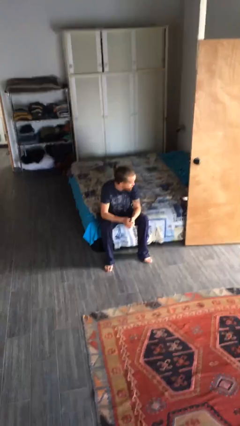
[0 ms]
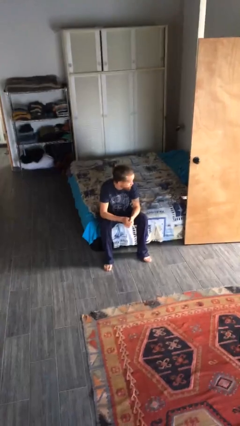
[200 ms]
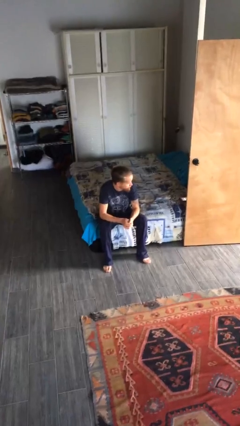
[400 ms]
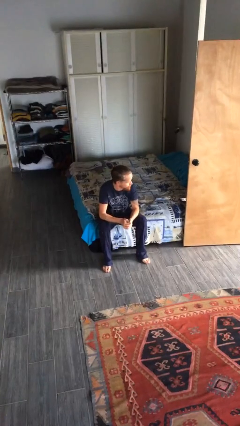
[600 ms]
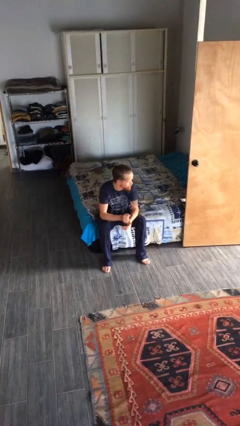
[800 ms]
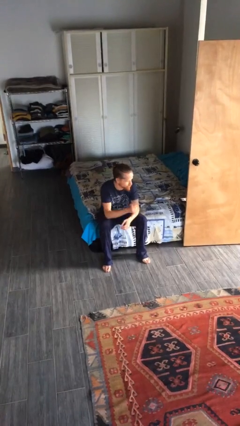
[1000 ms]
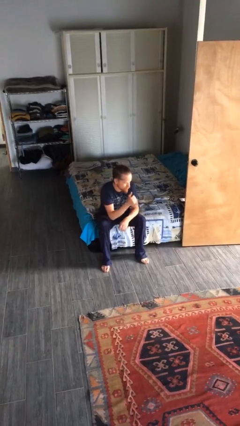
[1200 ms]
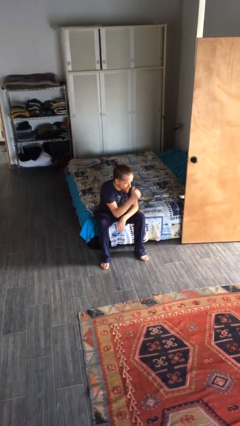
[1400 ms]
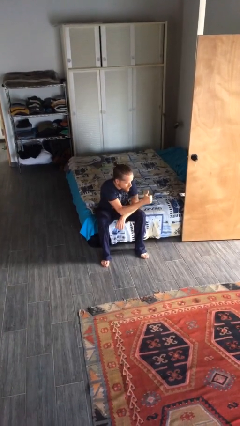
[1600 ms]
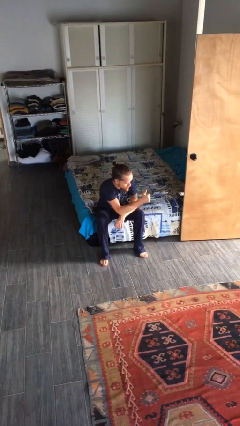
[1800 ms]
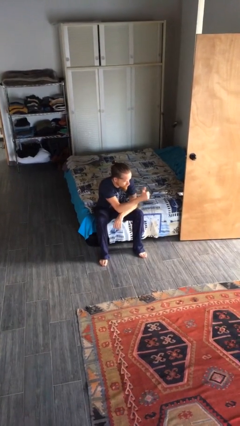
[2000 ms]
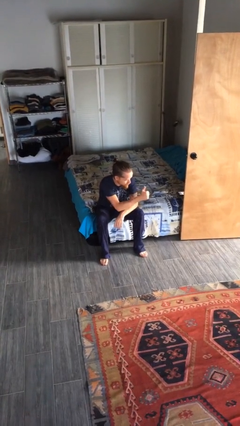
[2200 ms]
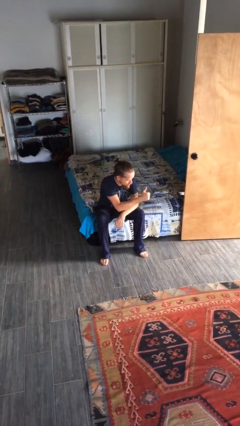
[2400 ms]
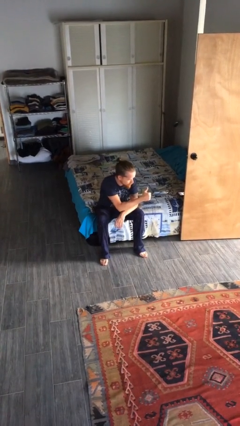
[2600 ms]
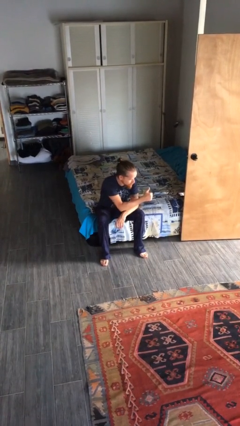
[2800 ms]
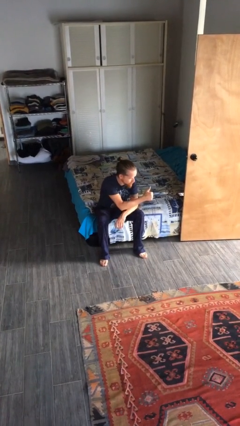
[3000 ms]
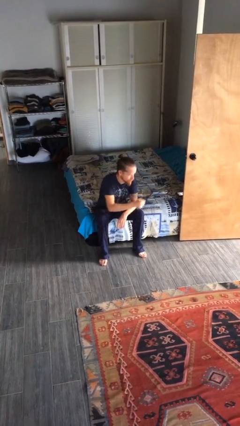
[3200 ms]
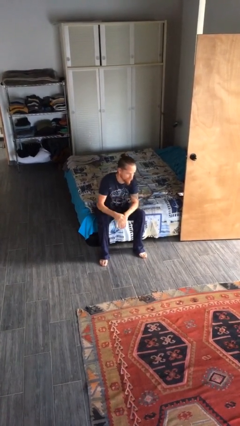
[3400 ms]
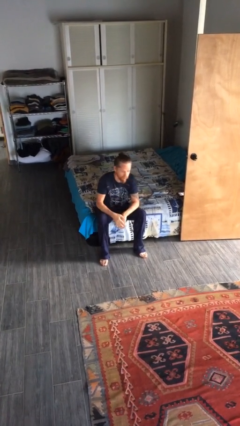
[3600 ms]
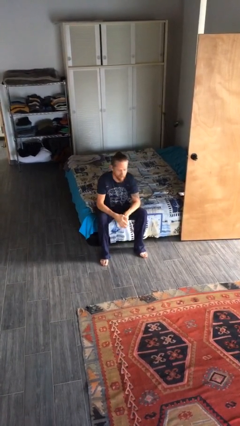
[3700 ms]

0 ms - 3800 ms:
person gestures thumbs up

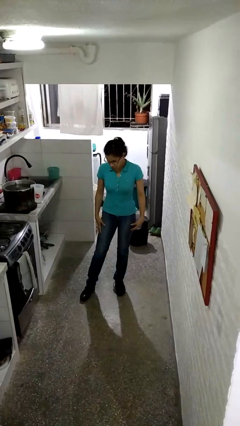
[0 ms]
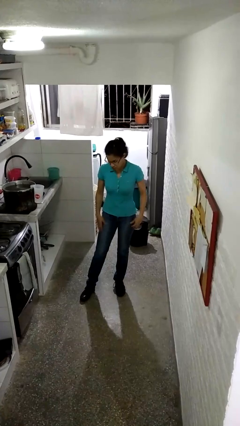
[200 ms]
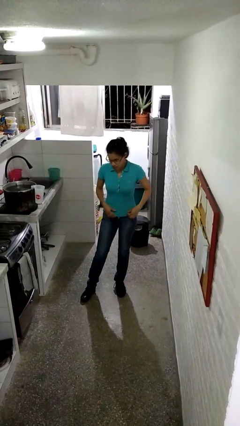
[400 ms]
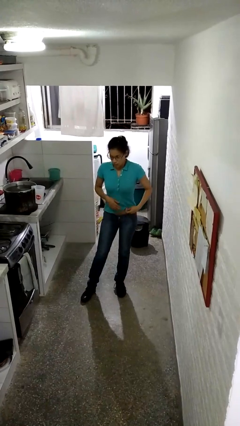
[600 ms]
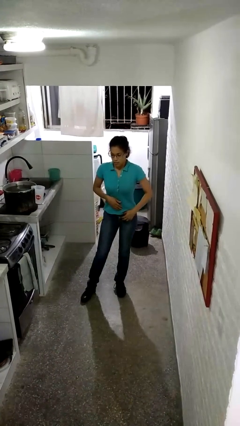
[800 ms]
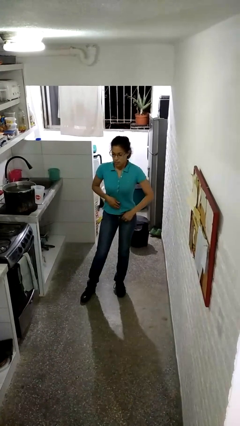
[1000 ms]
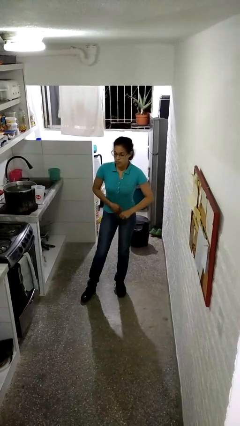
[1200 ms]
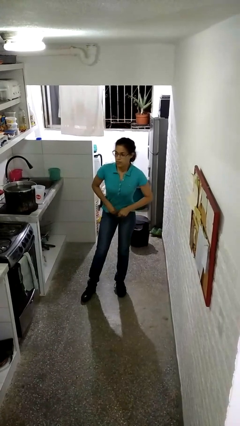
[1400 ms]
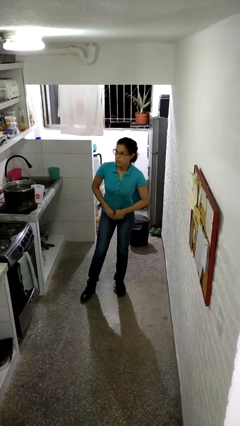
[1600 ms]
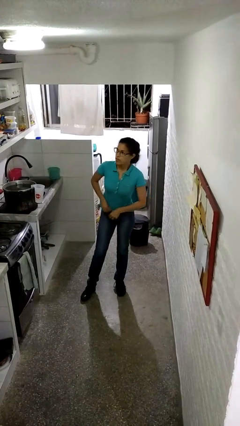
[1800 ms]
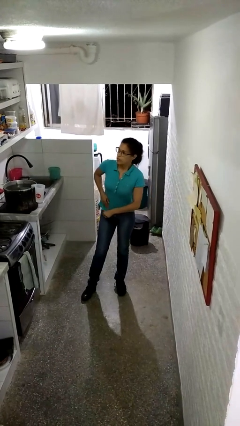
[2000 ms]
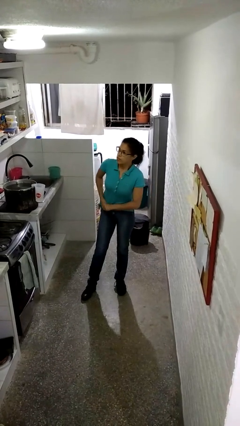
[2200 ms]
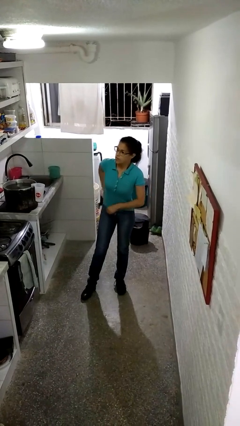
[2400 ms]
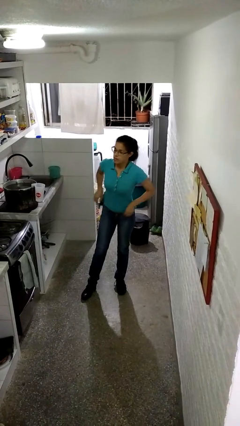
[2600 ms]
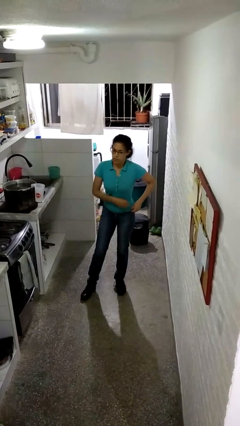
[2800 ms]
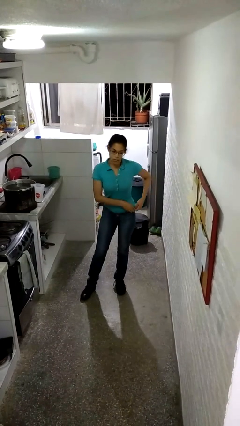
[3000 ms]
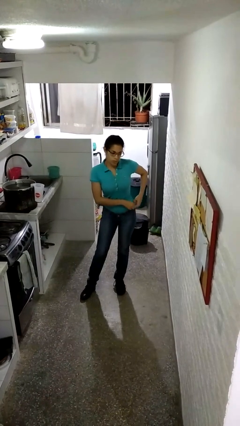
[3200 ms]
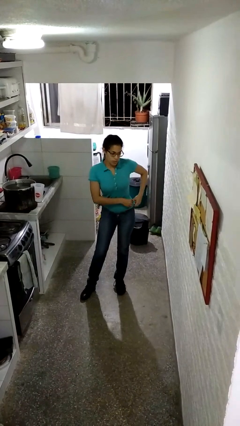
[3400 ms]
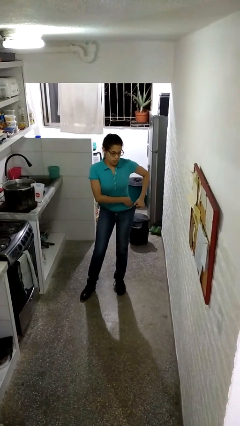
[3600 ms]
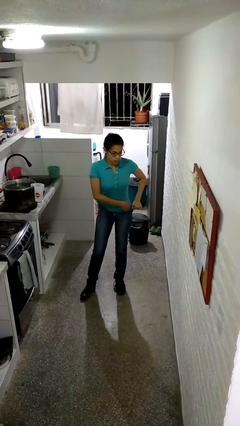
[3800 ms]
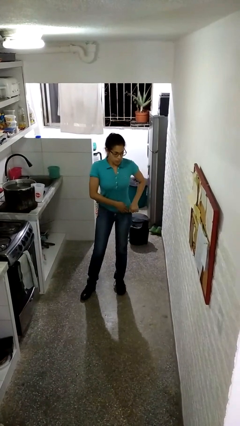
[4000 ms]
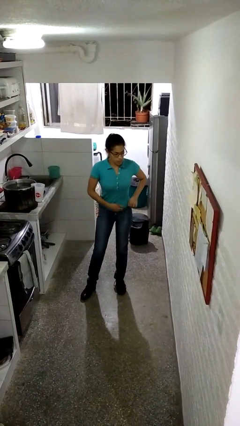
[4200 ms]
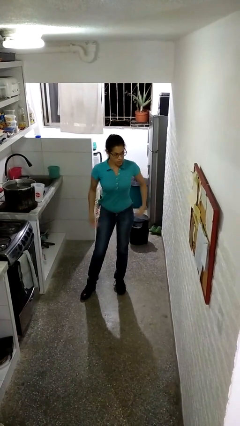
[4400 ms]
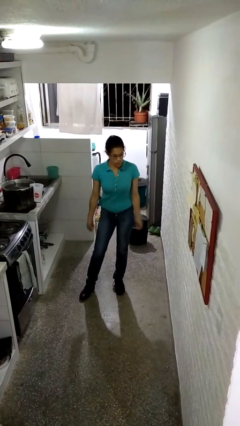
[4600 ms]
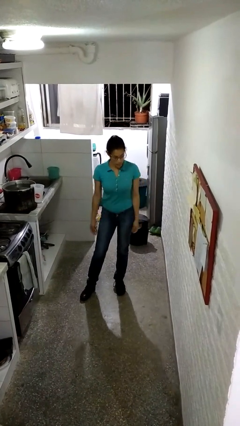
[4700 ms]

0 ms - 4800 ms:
person tucks in shirt

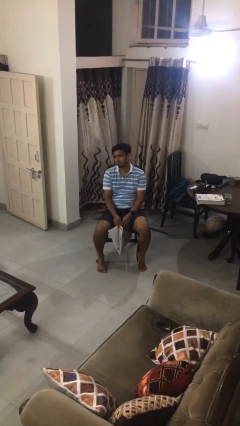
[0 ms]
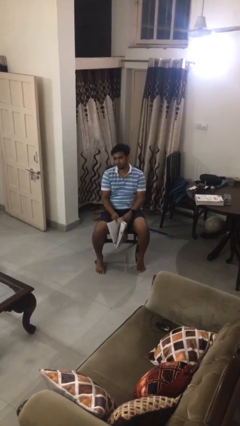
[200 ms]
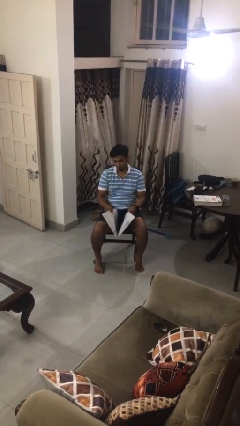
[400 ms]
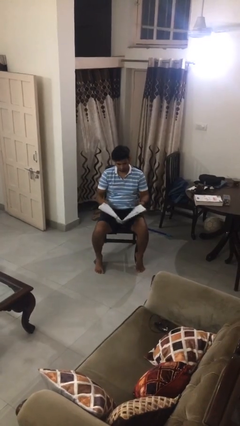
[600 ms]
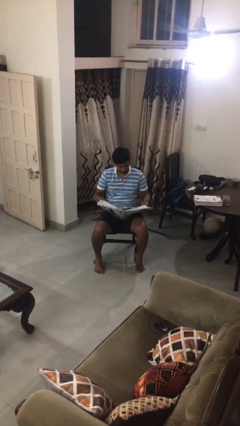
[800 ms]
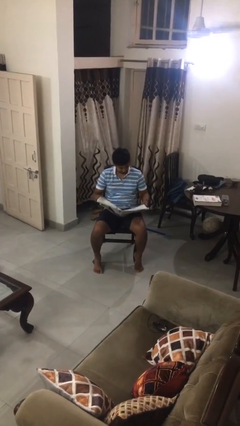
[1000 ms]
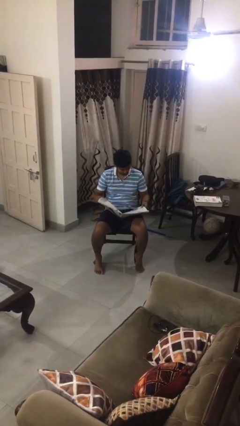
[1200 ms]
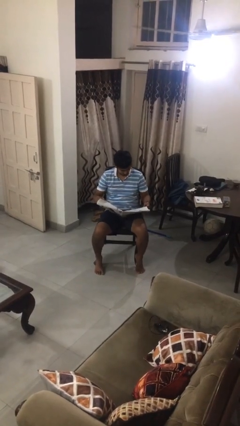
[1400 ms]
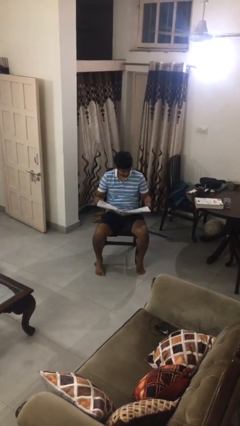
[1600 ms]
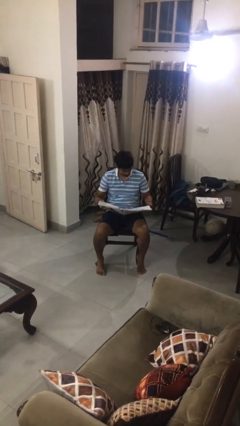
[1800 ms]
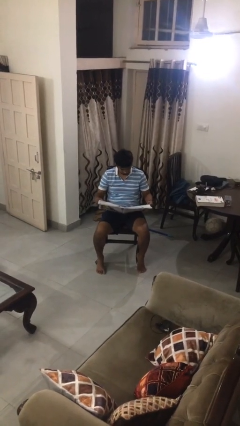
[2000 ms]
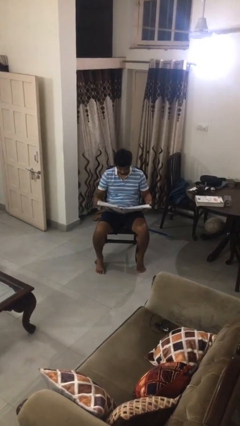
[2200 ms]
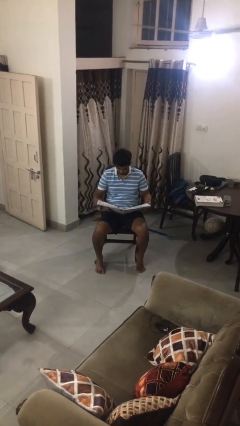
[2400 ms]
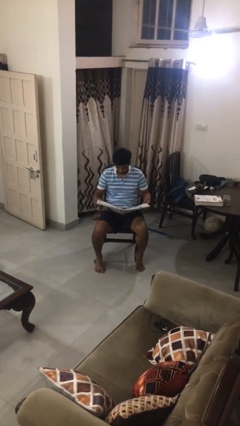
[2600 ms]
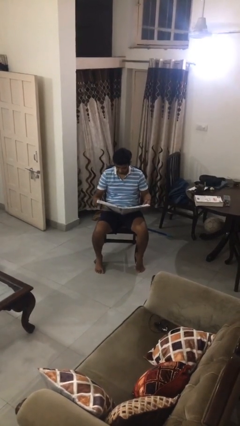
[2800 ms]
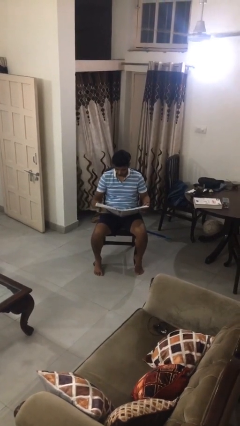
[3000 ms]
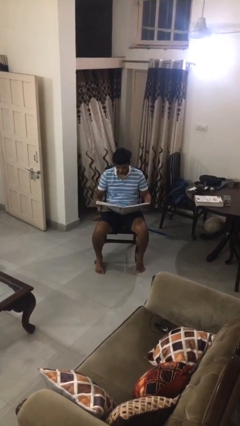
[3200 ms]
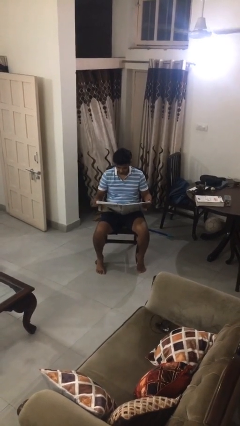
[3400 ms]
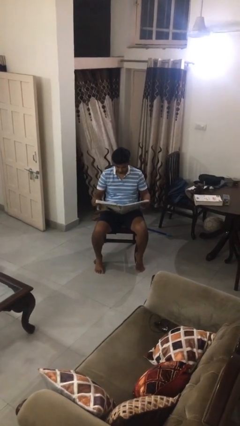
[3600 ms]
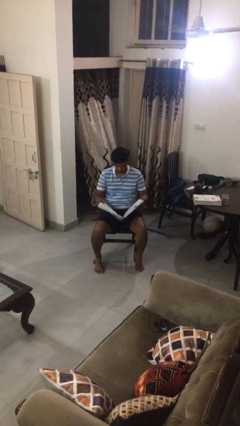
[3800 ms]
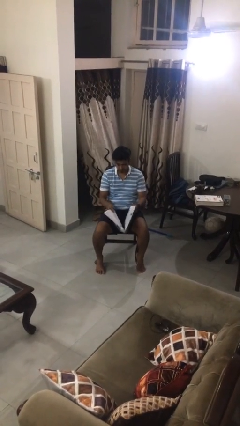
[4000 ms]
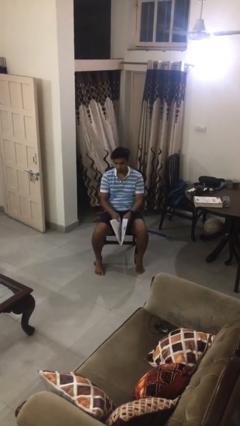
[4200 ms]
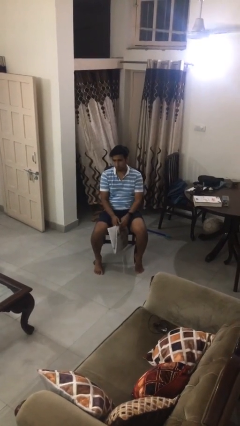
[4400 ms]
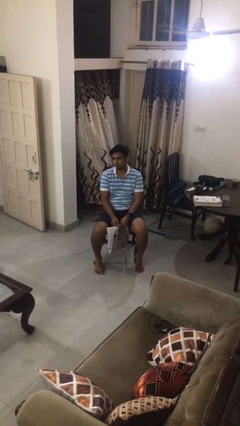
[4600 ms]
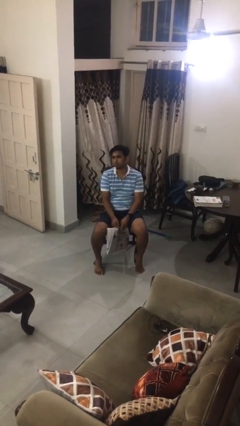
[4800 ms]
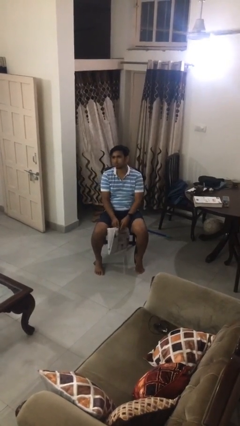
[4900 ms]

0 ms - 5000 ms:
person reads newspaper

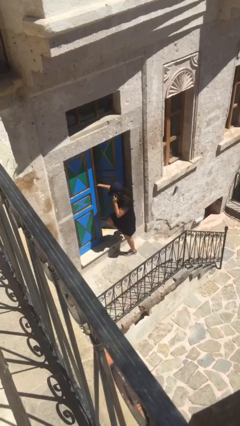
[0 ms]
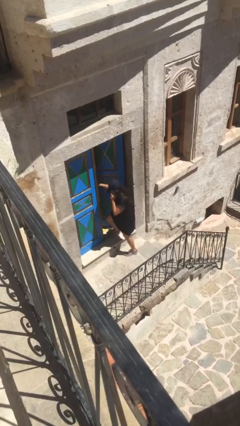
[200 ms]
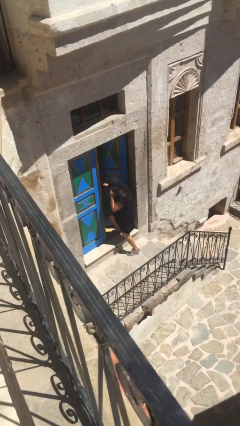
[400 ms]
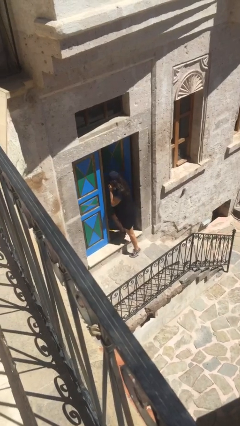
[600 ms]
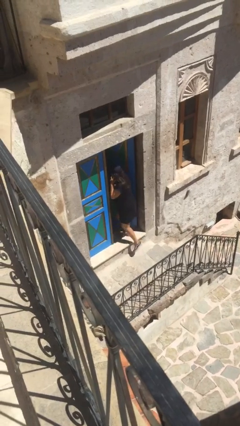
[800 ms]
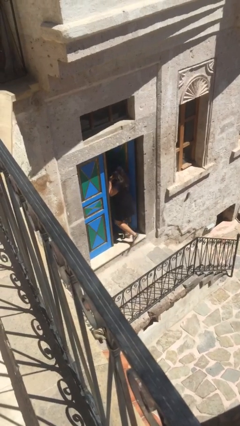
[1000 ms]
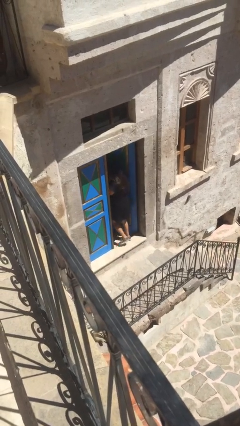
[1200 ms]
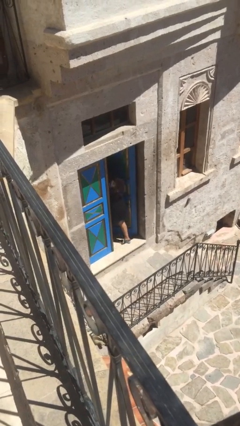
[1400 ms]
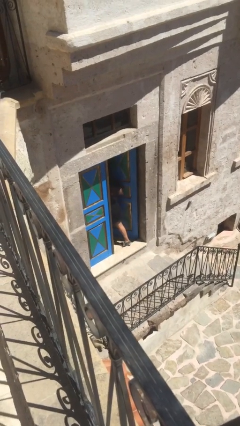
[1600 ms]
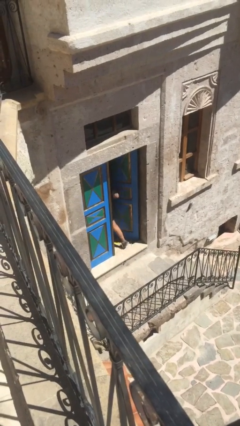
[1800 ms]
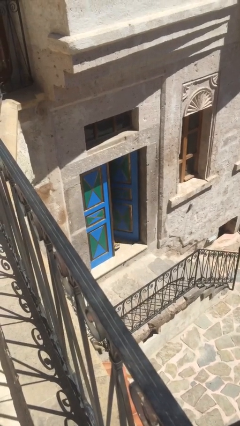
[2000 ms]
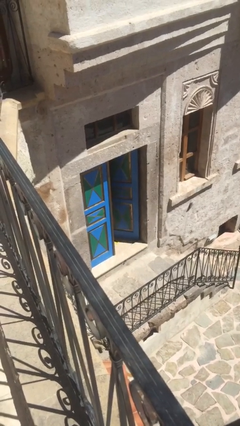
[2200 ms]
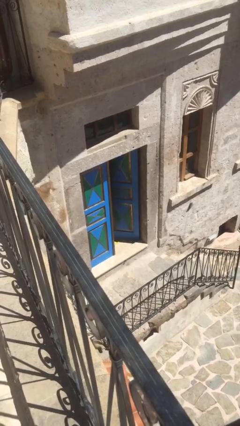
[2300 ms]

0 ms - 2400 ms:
person exits scene through structure

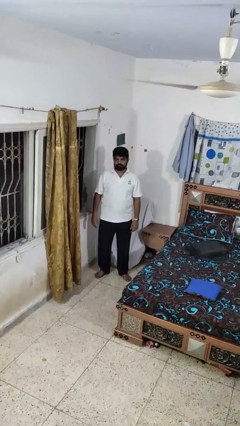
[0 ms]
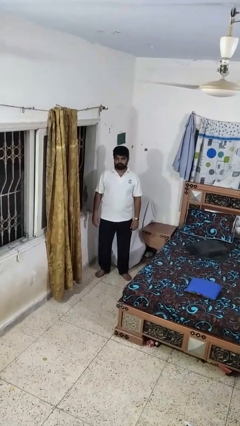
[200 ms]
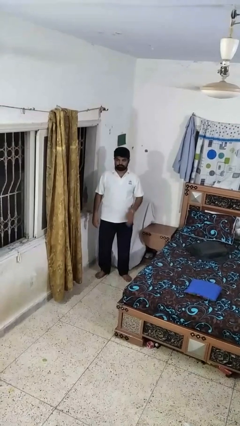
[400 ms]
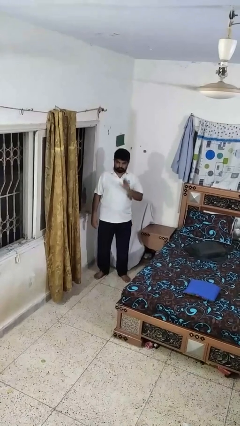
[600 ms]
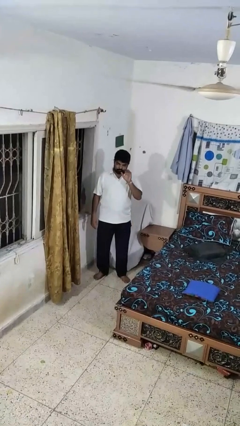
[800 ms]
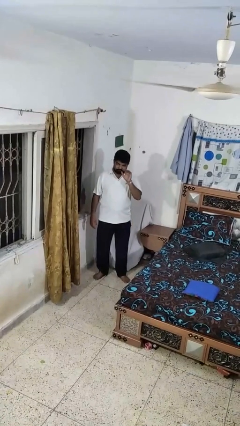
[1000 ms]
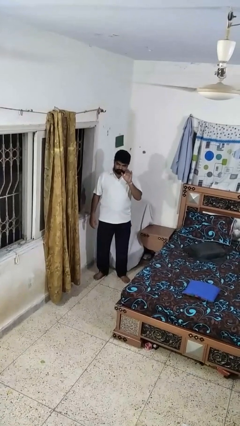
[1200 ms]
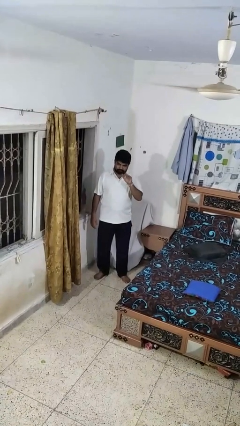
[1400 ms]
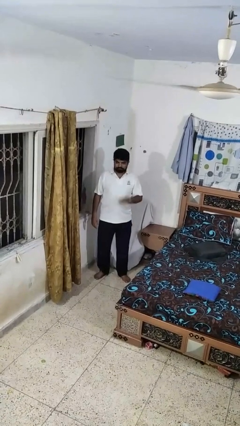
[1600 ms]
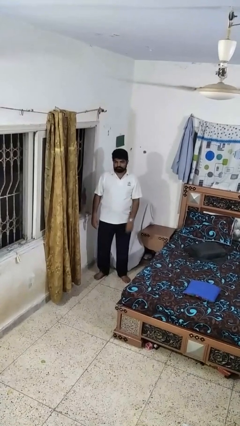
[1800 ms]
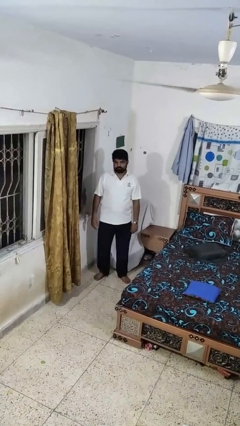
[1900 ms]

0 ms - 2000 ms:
person waves at person
